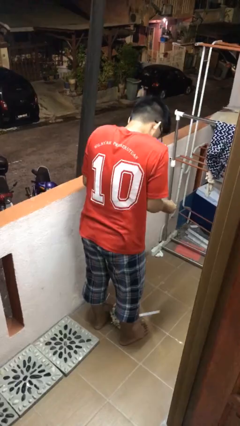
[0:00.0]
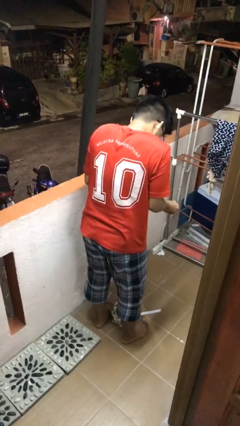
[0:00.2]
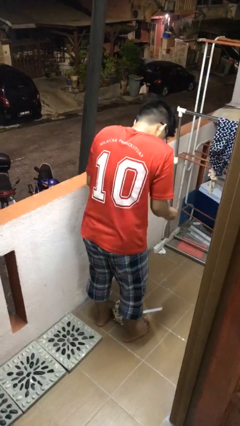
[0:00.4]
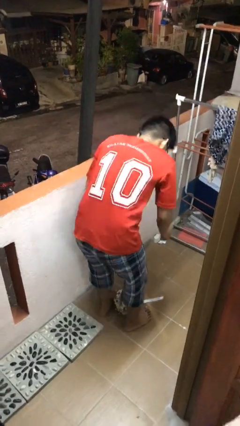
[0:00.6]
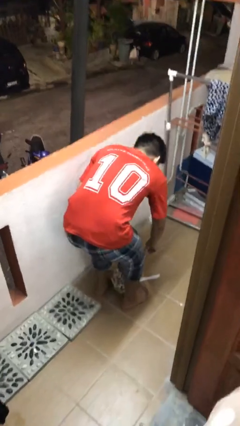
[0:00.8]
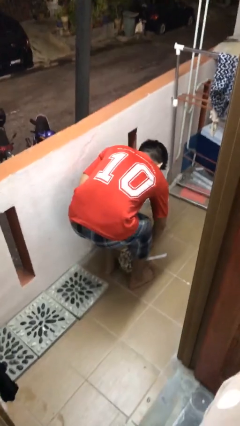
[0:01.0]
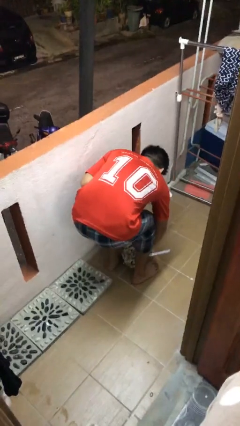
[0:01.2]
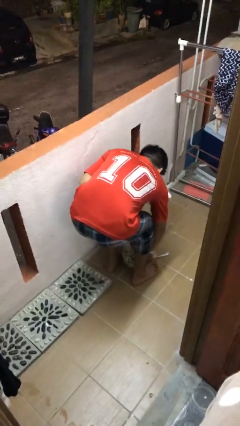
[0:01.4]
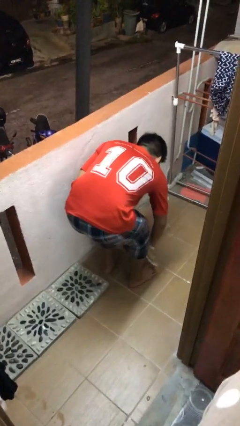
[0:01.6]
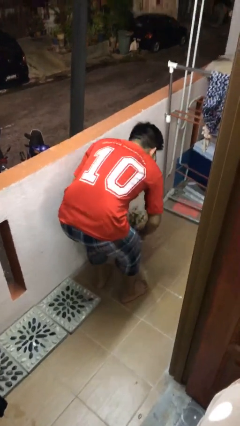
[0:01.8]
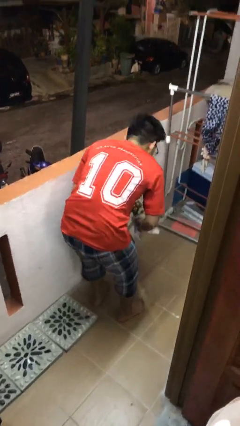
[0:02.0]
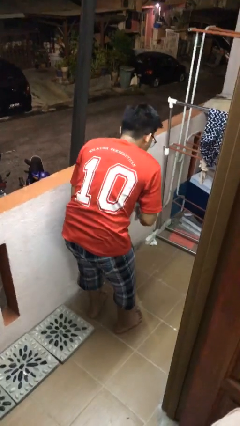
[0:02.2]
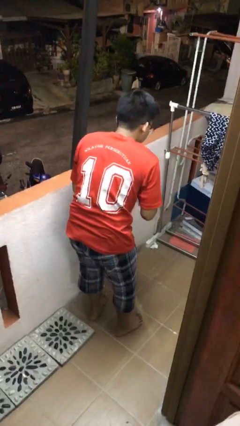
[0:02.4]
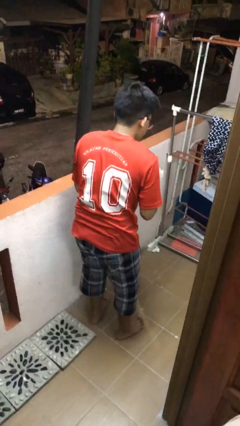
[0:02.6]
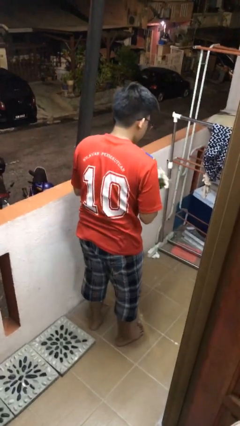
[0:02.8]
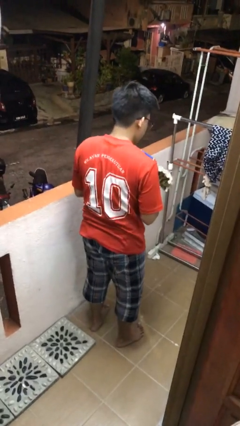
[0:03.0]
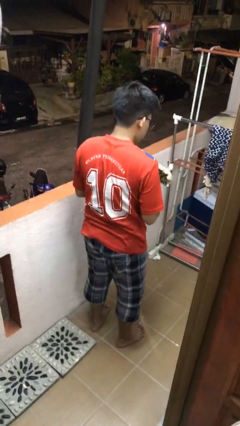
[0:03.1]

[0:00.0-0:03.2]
person picks up object from floor

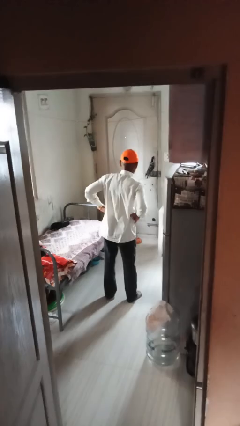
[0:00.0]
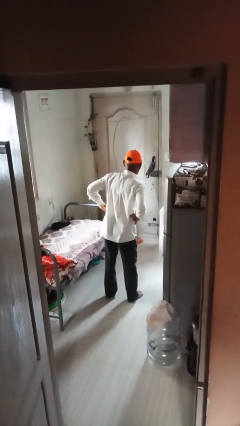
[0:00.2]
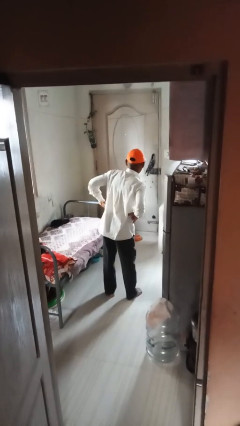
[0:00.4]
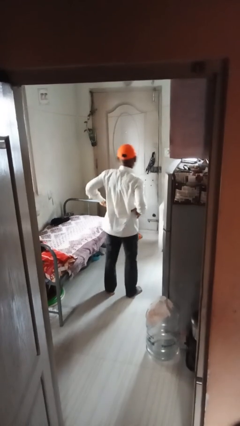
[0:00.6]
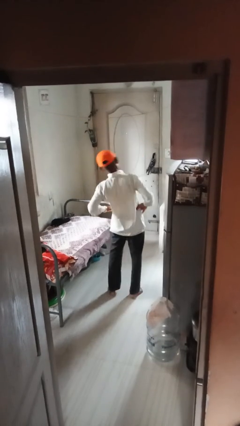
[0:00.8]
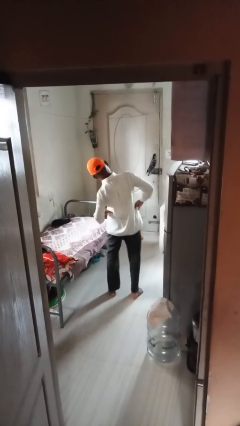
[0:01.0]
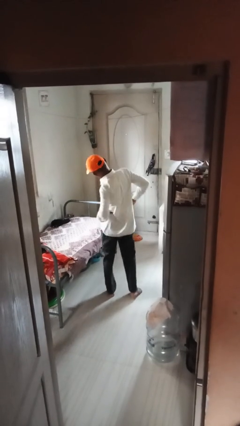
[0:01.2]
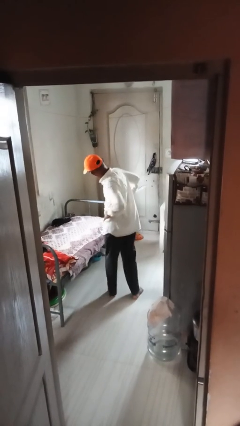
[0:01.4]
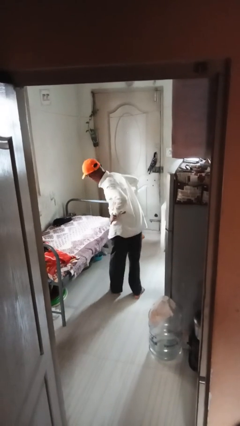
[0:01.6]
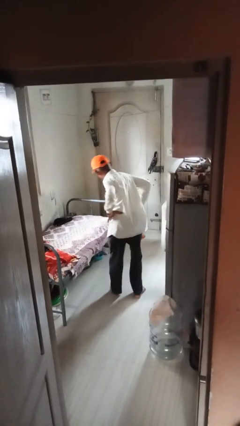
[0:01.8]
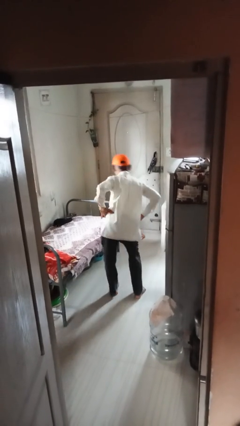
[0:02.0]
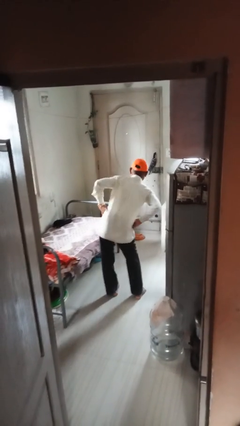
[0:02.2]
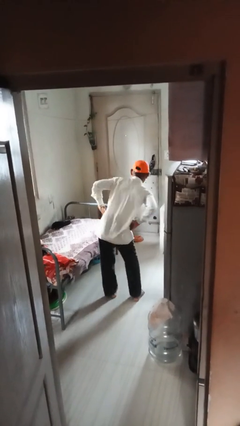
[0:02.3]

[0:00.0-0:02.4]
person wiggles hips

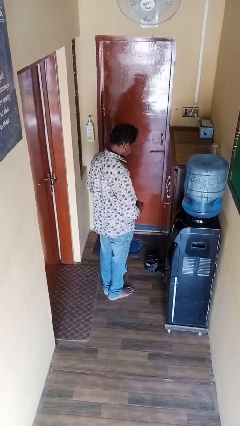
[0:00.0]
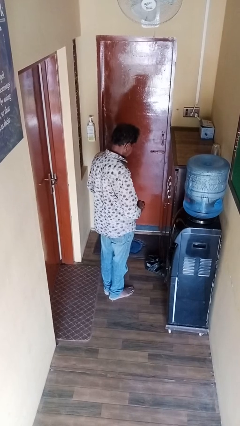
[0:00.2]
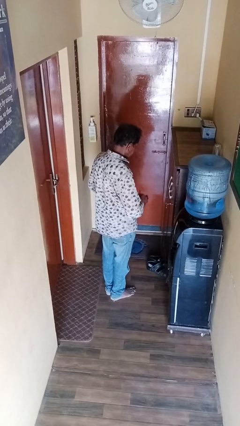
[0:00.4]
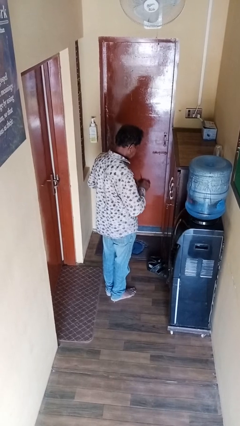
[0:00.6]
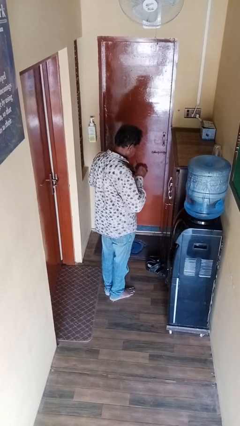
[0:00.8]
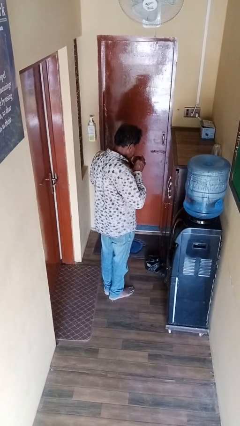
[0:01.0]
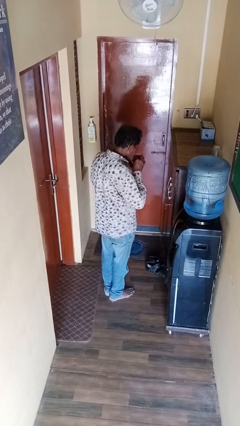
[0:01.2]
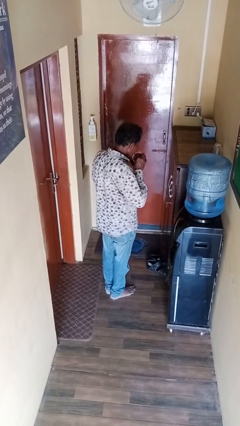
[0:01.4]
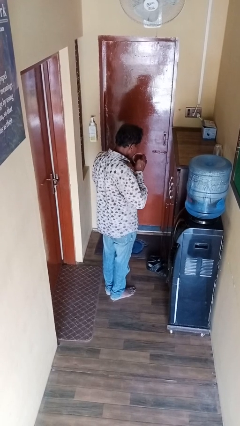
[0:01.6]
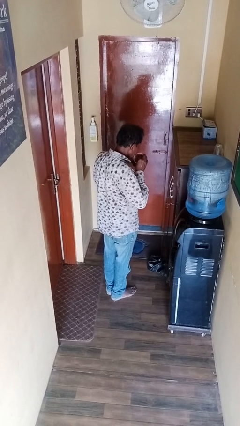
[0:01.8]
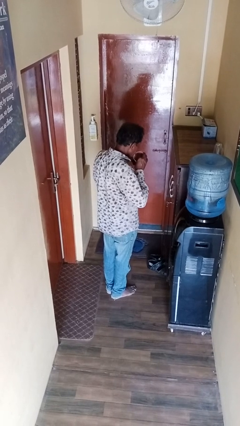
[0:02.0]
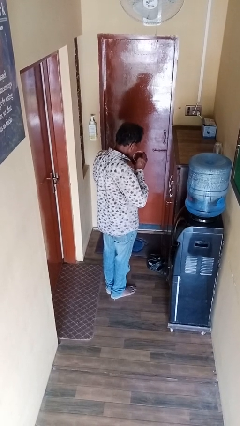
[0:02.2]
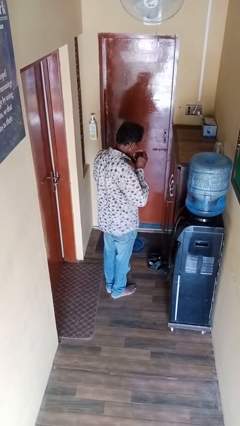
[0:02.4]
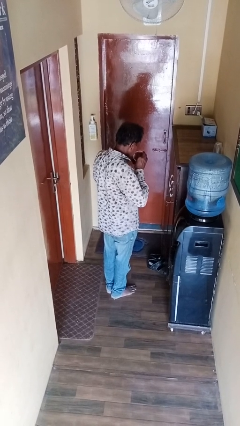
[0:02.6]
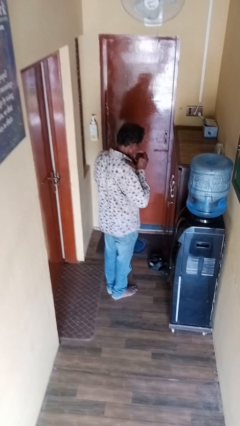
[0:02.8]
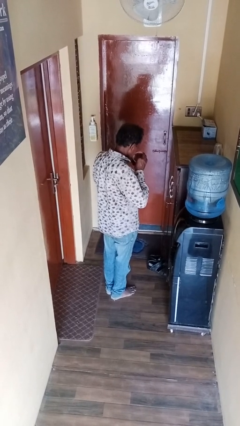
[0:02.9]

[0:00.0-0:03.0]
person drinks from straw

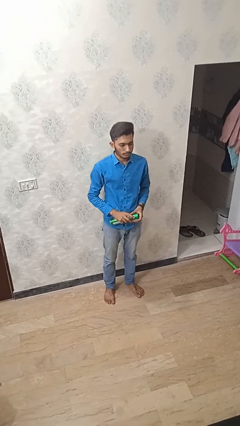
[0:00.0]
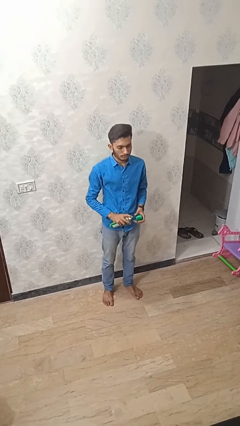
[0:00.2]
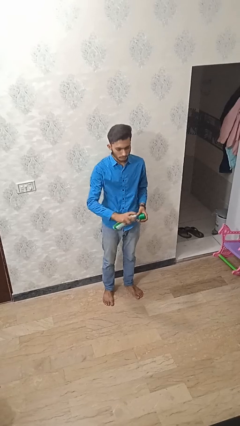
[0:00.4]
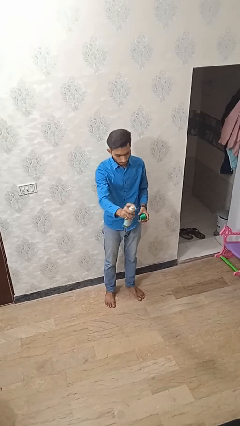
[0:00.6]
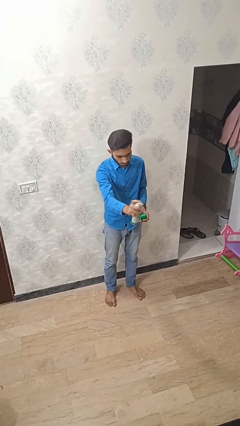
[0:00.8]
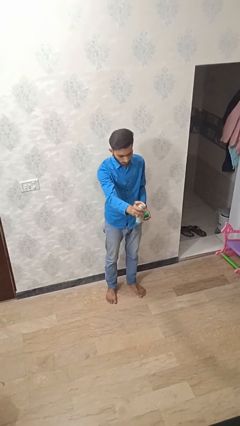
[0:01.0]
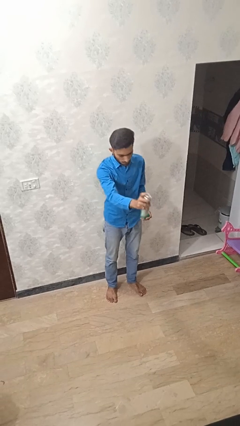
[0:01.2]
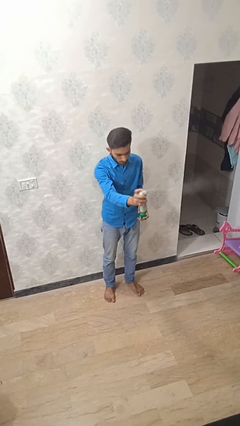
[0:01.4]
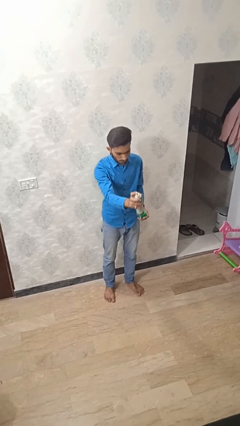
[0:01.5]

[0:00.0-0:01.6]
person sprays from bottle

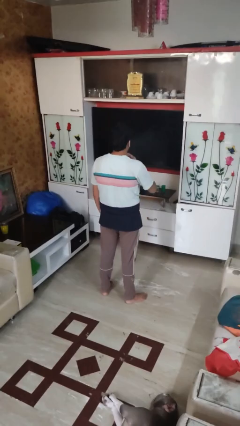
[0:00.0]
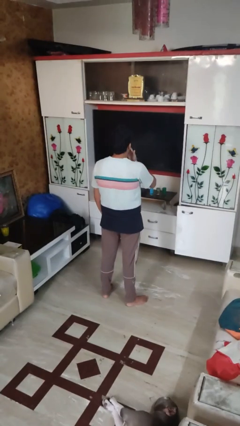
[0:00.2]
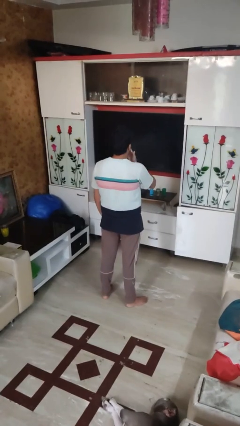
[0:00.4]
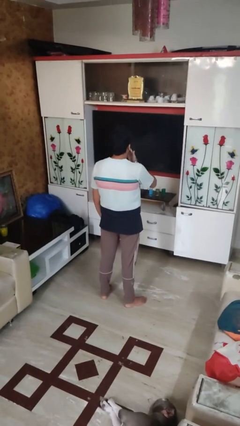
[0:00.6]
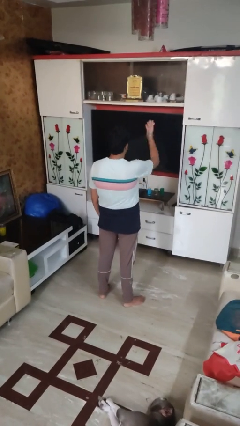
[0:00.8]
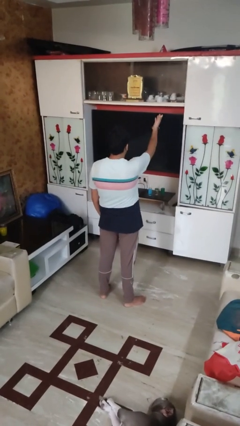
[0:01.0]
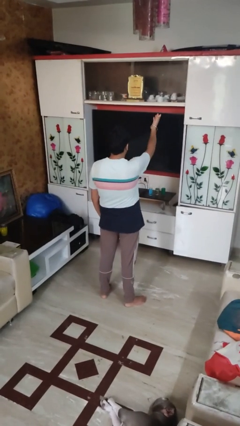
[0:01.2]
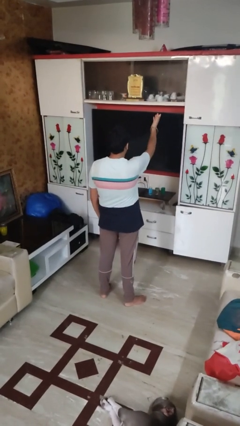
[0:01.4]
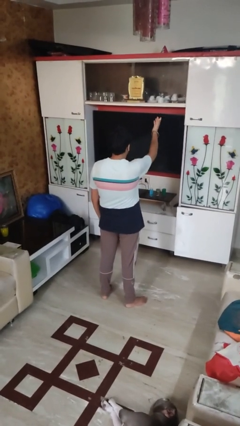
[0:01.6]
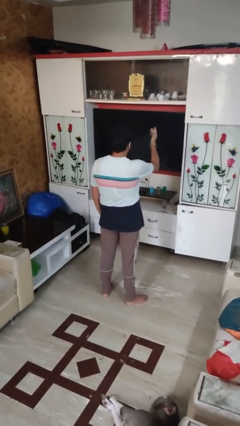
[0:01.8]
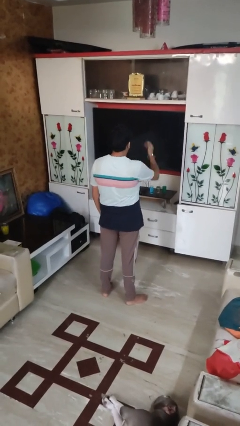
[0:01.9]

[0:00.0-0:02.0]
person gestures blow kiss

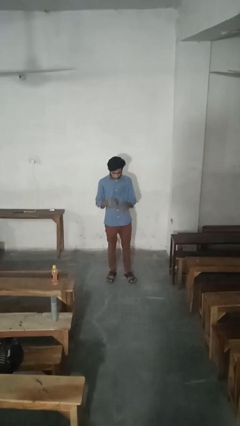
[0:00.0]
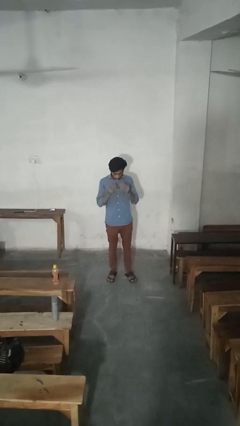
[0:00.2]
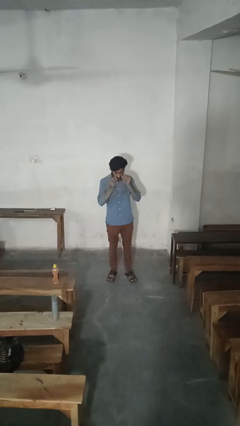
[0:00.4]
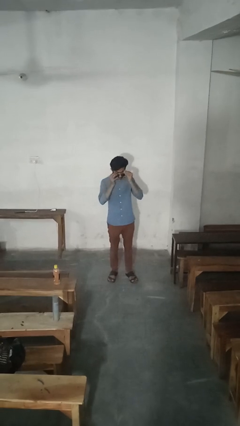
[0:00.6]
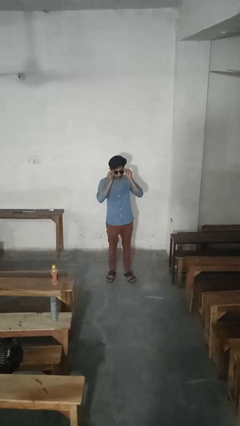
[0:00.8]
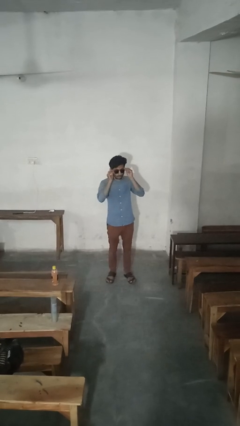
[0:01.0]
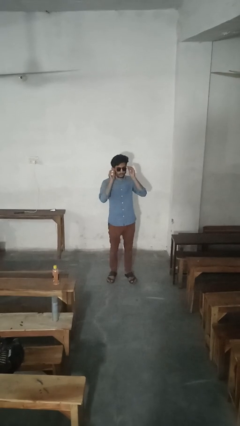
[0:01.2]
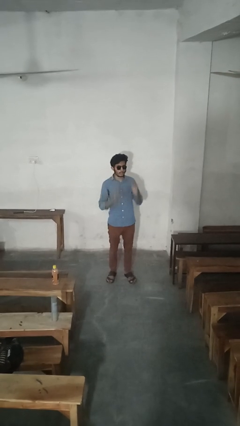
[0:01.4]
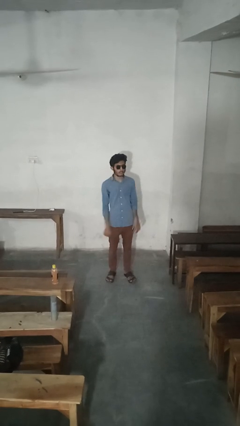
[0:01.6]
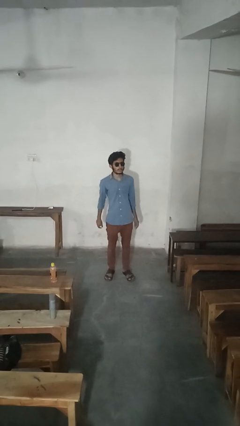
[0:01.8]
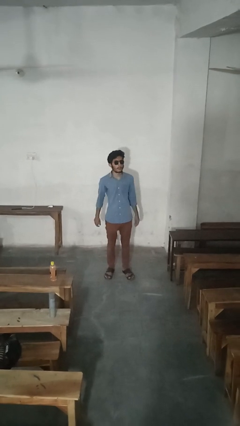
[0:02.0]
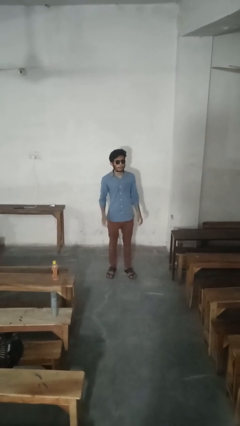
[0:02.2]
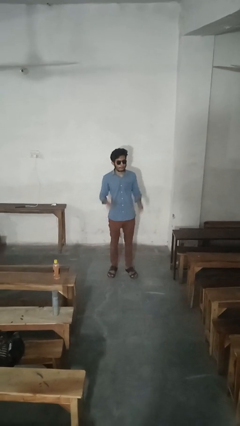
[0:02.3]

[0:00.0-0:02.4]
person puts on sunglasses

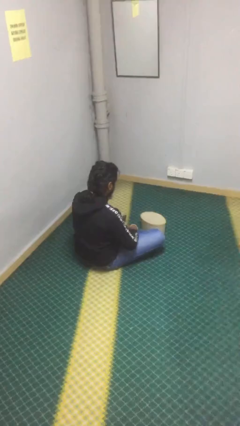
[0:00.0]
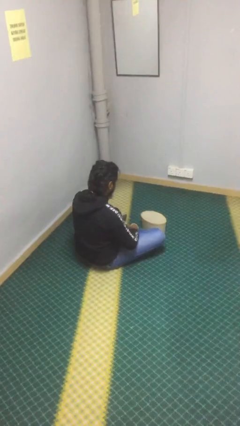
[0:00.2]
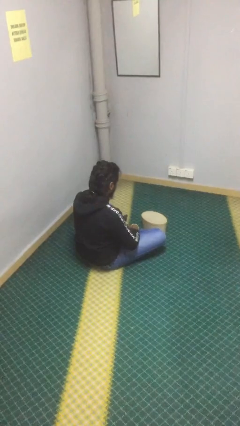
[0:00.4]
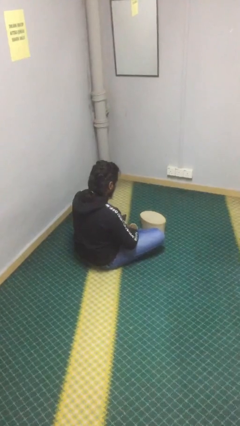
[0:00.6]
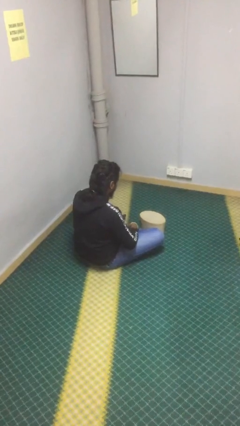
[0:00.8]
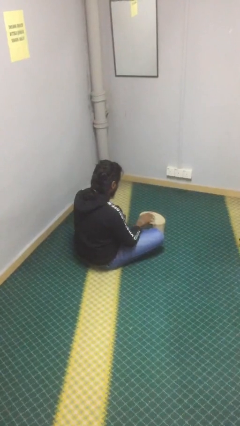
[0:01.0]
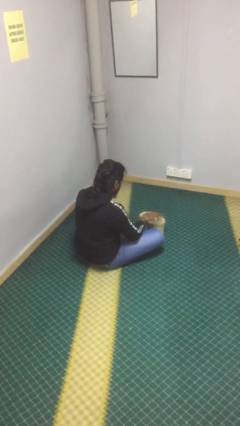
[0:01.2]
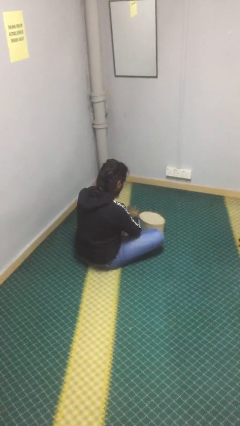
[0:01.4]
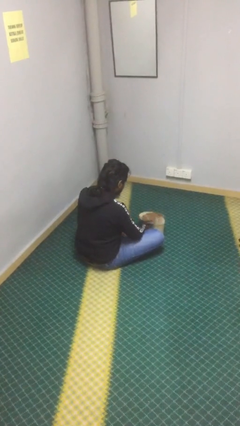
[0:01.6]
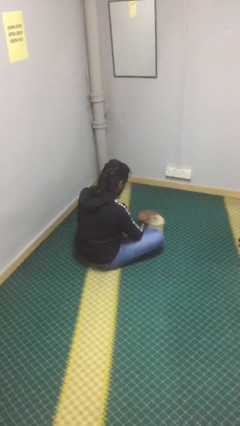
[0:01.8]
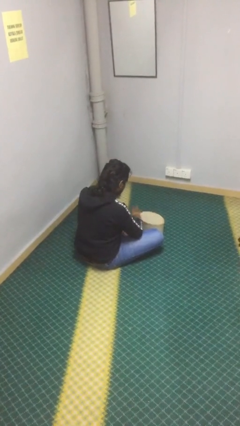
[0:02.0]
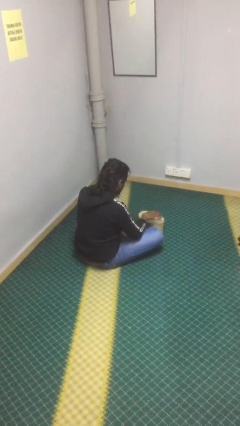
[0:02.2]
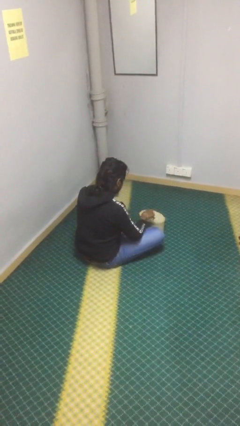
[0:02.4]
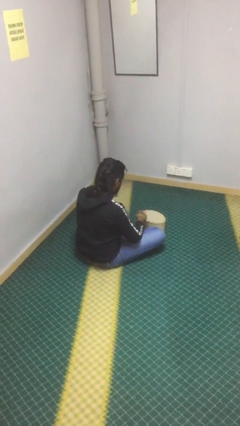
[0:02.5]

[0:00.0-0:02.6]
person waves hand over object
